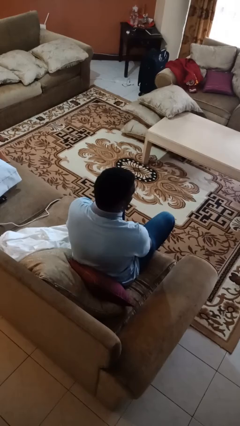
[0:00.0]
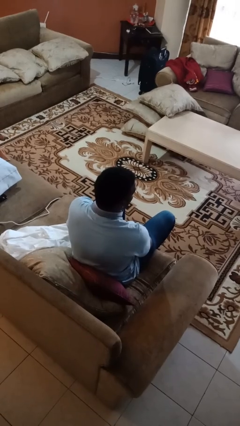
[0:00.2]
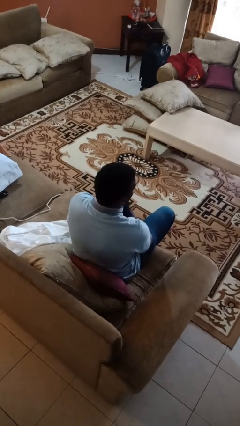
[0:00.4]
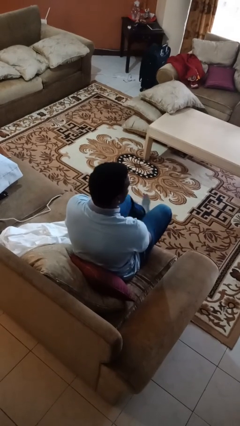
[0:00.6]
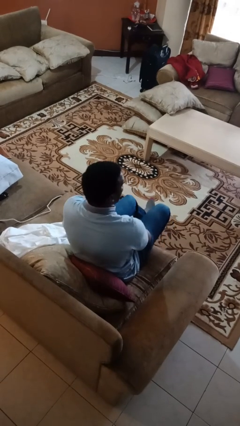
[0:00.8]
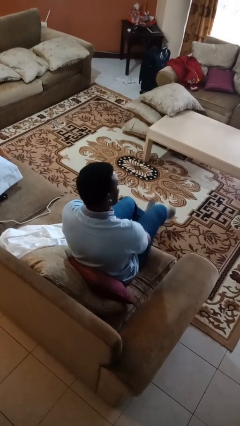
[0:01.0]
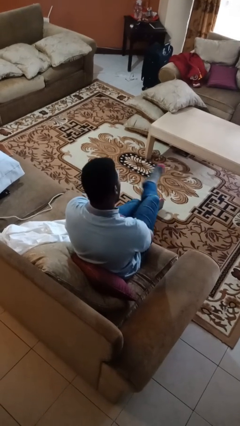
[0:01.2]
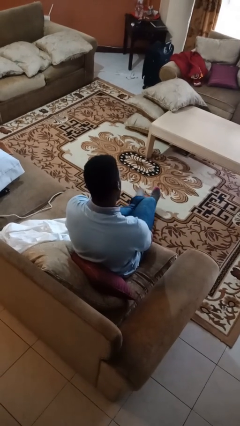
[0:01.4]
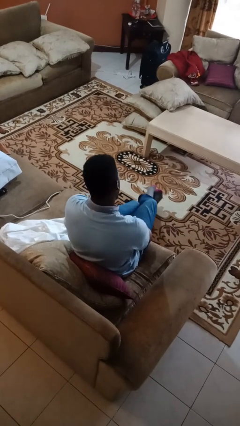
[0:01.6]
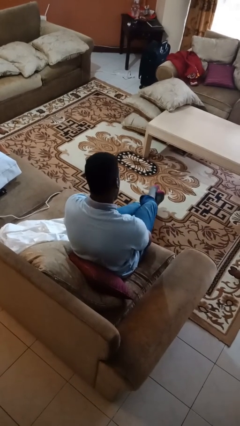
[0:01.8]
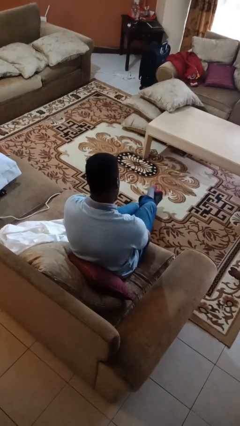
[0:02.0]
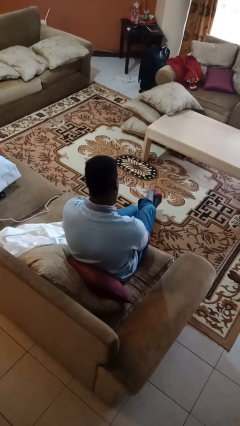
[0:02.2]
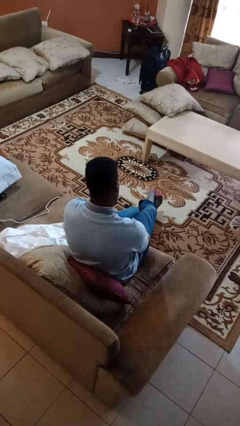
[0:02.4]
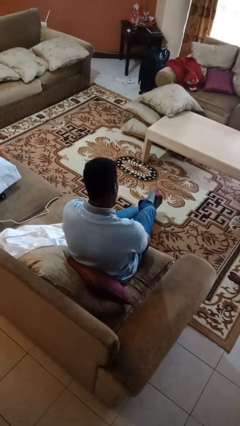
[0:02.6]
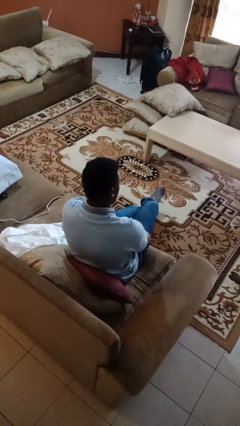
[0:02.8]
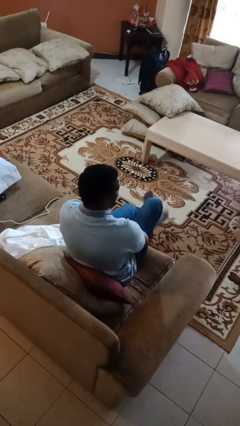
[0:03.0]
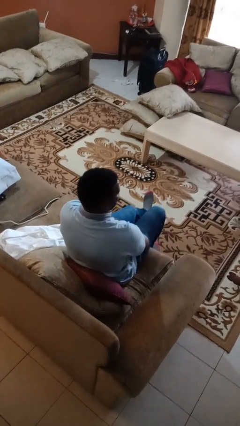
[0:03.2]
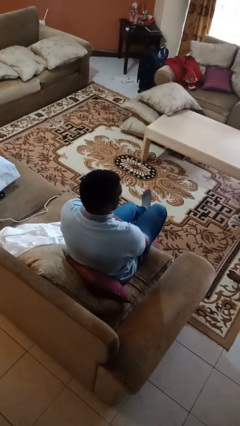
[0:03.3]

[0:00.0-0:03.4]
person crosses legs

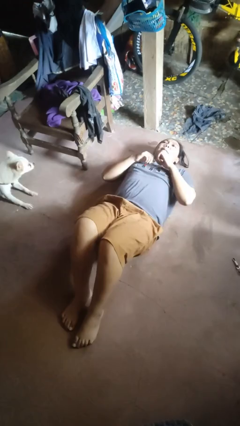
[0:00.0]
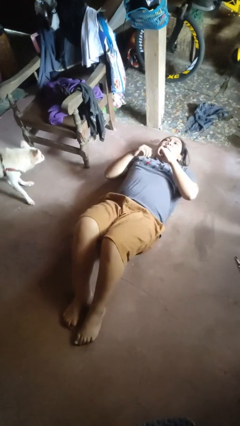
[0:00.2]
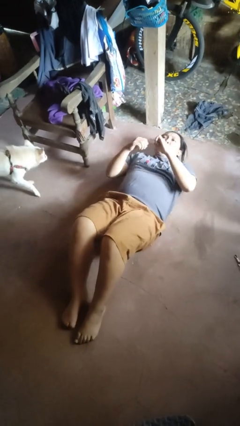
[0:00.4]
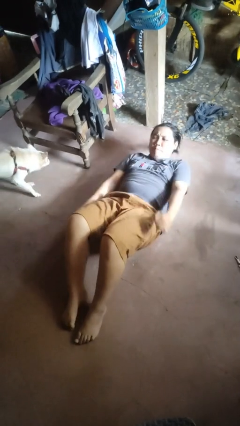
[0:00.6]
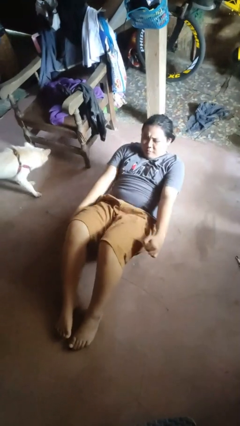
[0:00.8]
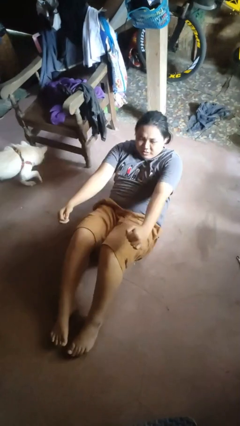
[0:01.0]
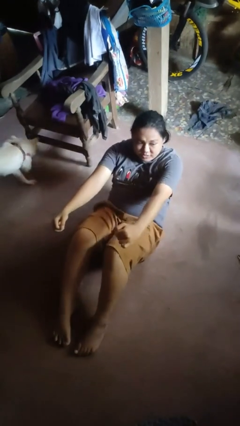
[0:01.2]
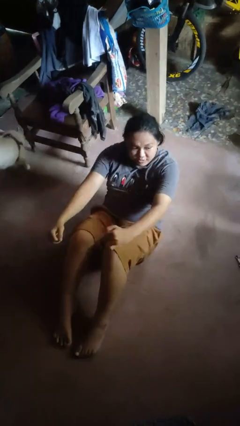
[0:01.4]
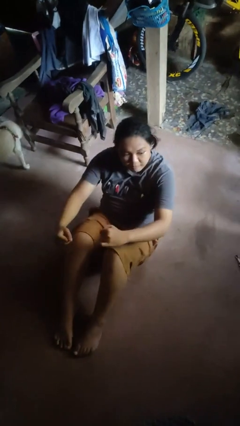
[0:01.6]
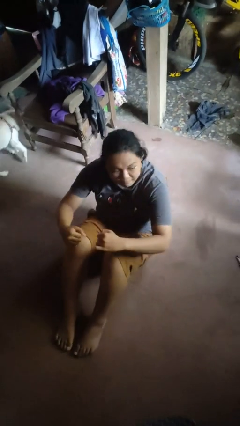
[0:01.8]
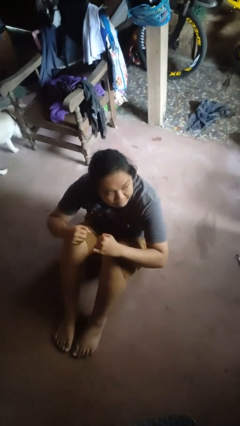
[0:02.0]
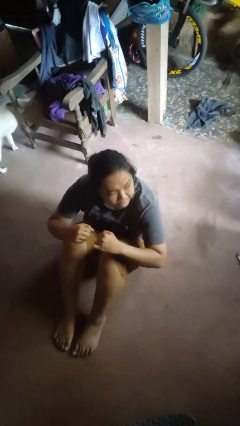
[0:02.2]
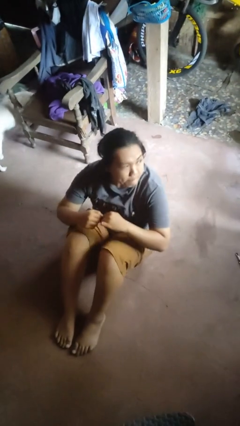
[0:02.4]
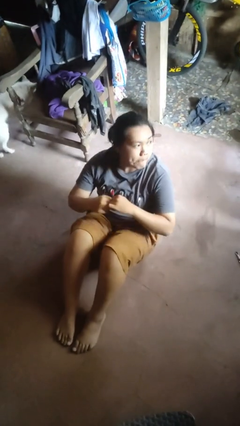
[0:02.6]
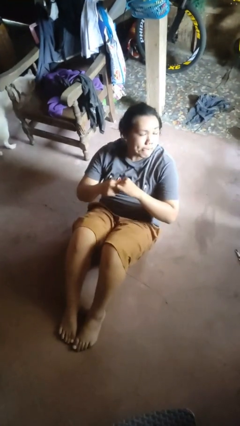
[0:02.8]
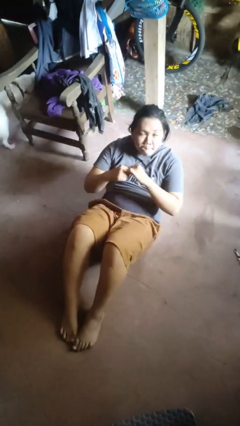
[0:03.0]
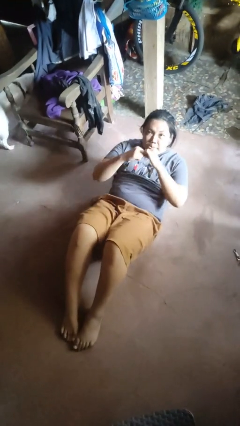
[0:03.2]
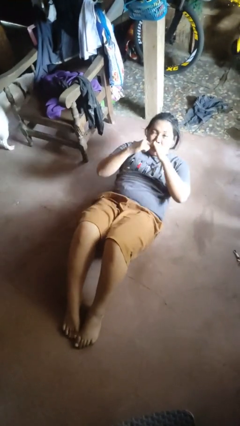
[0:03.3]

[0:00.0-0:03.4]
person exercises with situp

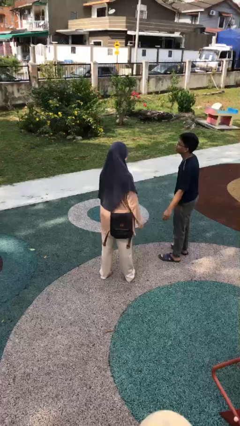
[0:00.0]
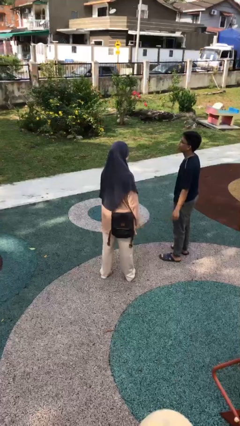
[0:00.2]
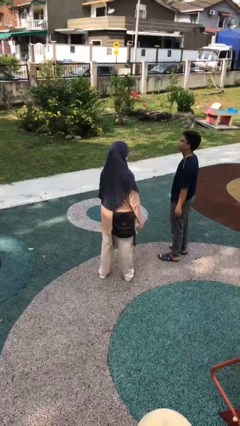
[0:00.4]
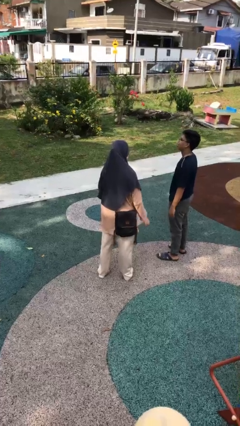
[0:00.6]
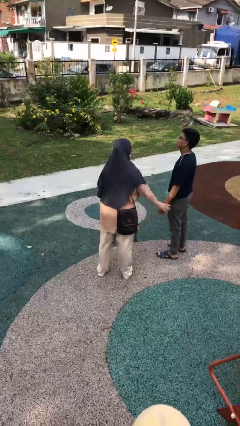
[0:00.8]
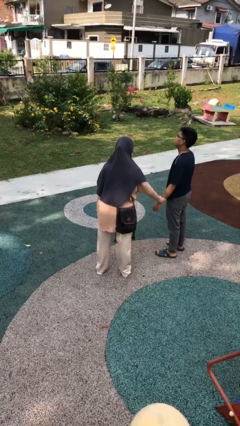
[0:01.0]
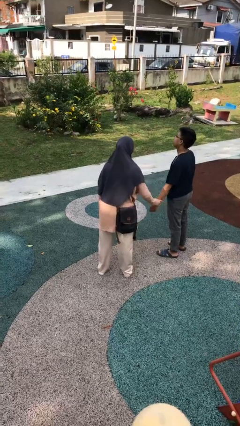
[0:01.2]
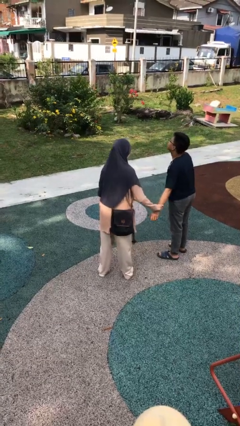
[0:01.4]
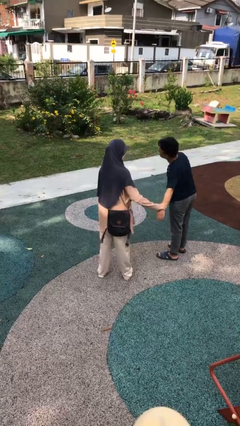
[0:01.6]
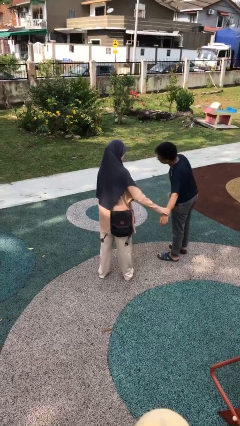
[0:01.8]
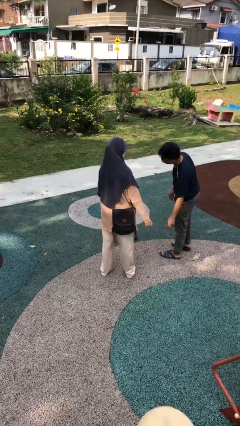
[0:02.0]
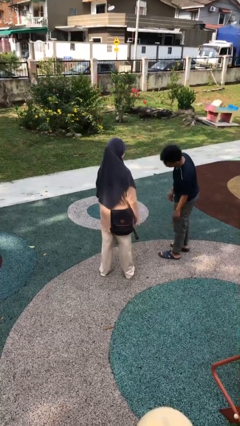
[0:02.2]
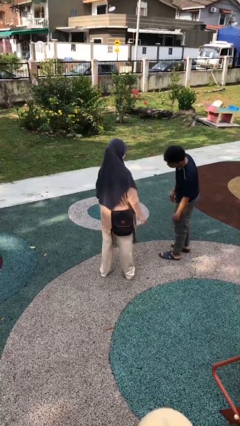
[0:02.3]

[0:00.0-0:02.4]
person grabs person by forearm

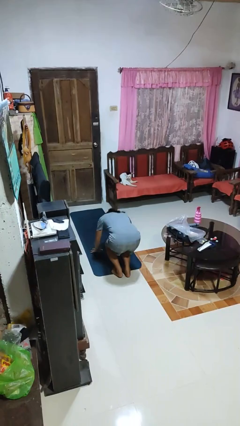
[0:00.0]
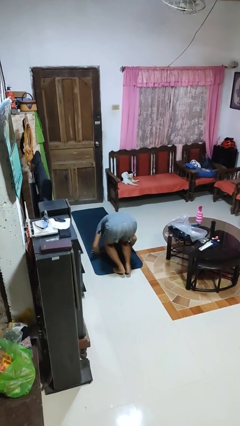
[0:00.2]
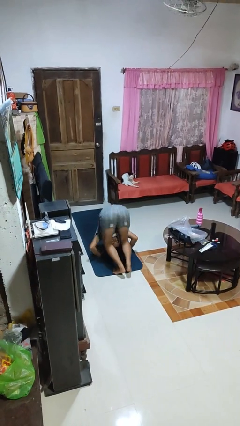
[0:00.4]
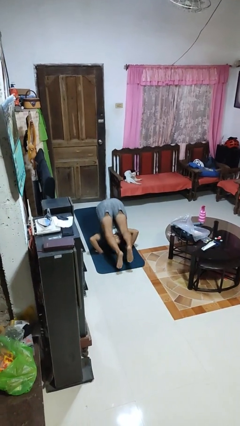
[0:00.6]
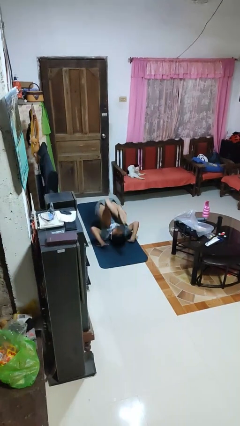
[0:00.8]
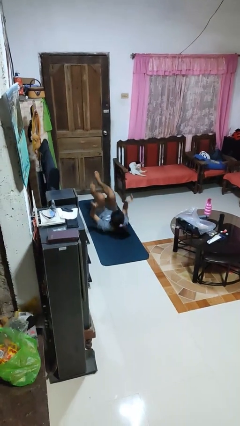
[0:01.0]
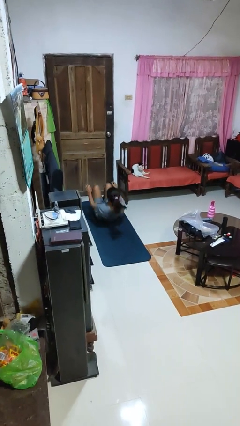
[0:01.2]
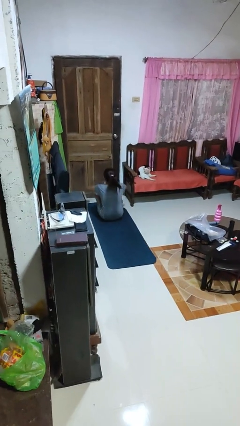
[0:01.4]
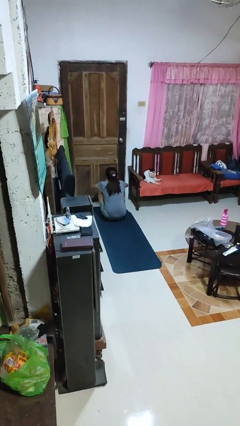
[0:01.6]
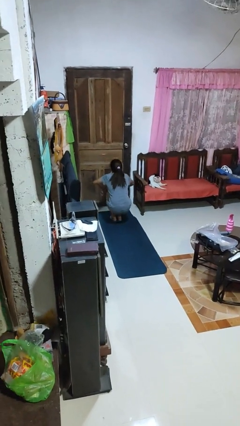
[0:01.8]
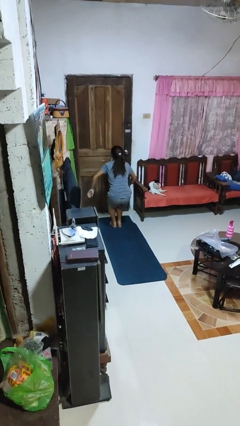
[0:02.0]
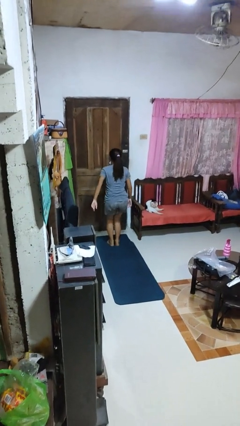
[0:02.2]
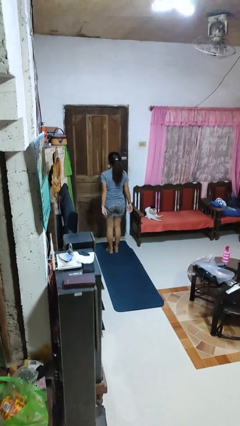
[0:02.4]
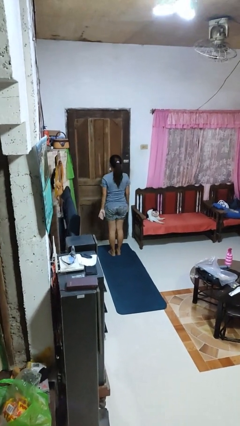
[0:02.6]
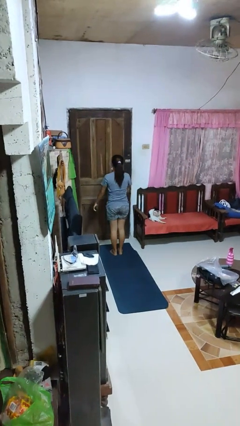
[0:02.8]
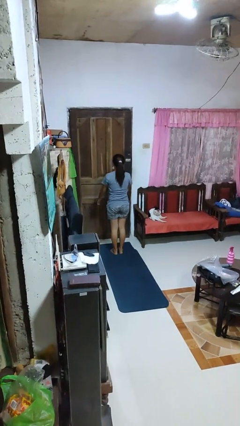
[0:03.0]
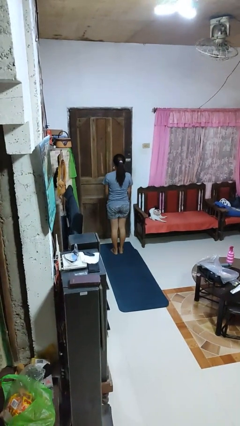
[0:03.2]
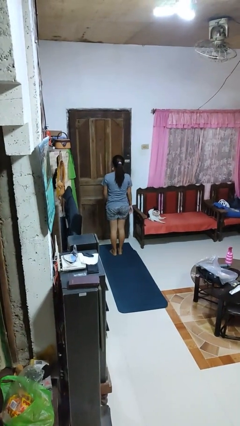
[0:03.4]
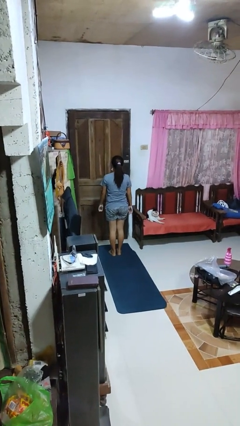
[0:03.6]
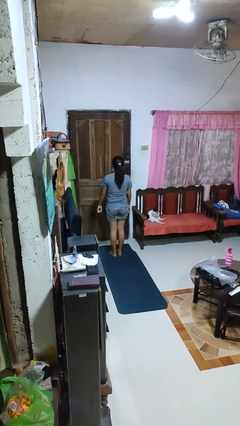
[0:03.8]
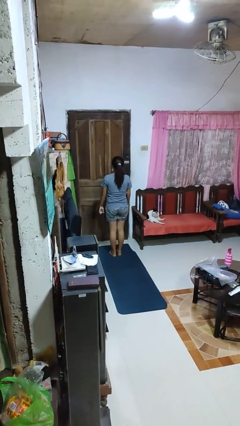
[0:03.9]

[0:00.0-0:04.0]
person somersaults

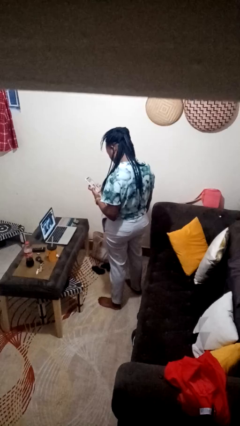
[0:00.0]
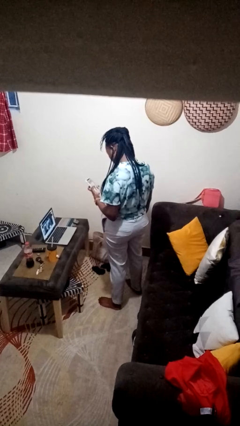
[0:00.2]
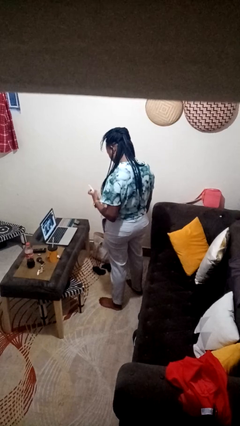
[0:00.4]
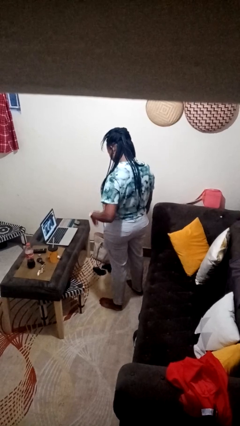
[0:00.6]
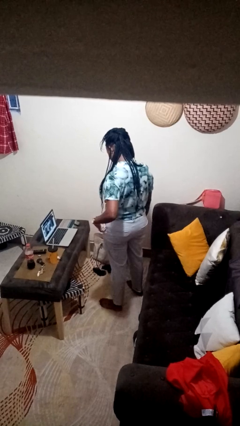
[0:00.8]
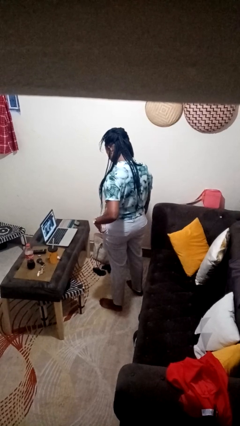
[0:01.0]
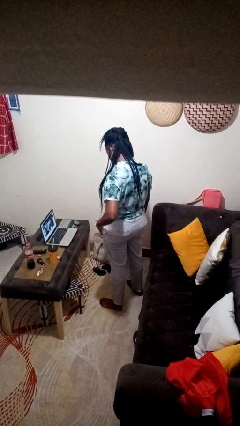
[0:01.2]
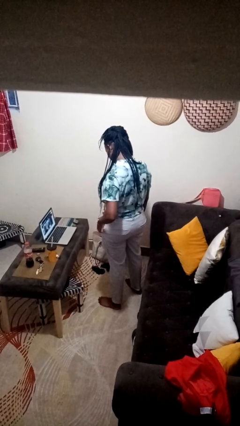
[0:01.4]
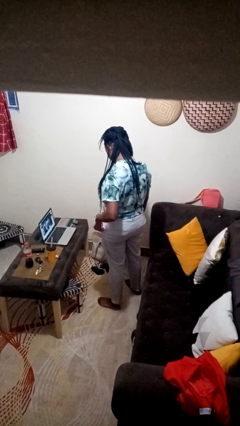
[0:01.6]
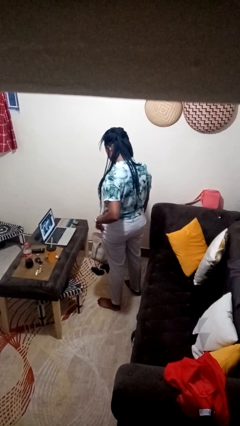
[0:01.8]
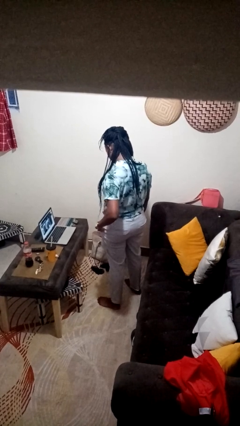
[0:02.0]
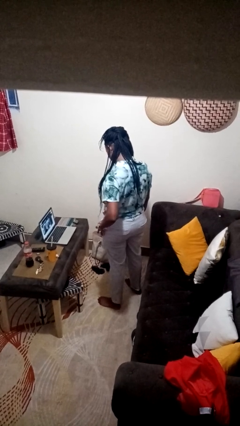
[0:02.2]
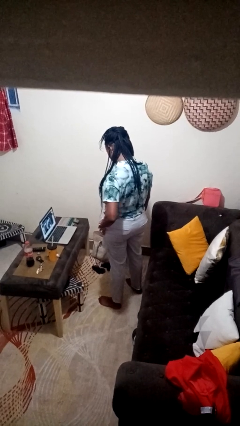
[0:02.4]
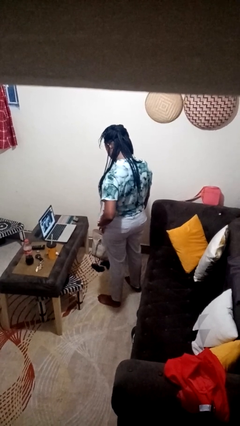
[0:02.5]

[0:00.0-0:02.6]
person puts phone into pocket

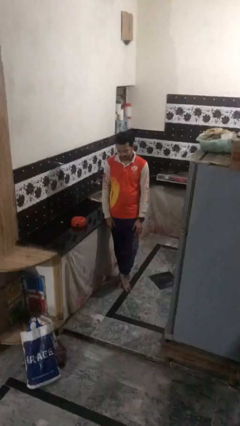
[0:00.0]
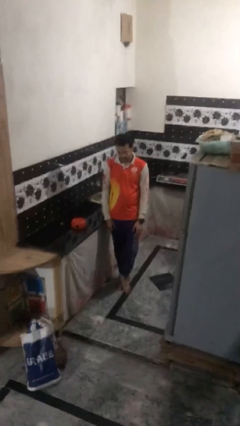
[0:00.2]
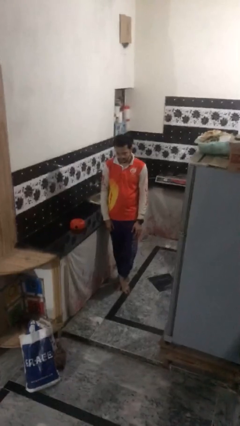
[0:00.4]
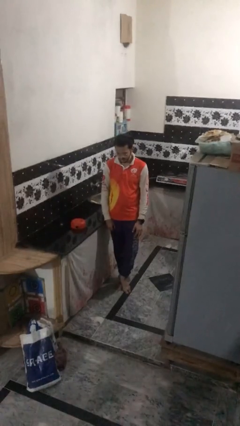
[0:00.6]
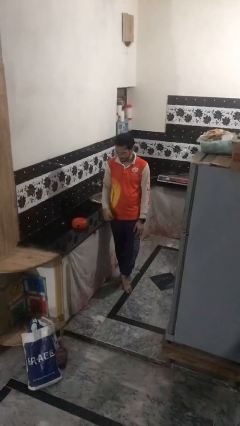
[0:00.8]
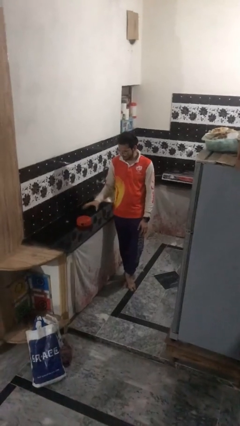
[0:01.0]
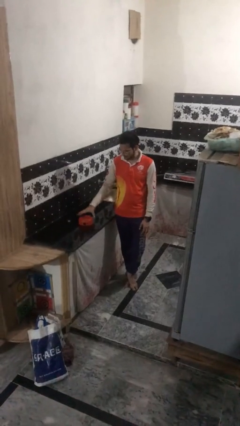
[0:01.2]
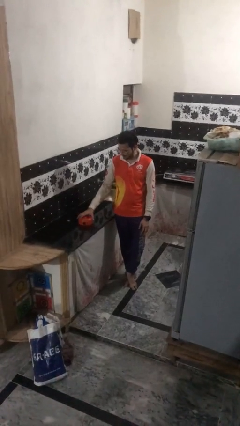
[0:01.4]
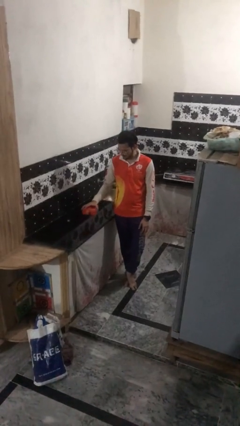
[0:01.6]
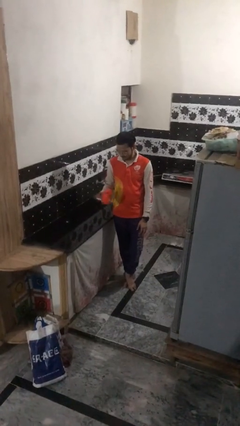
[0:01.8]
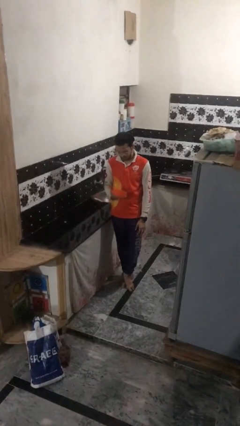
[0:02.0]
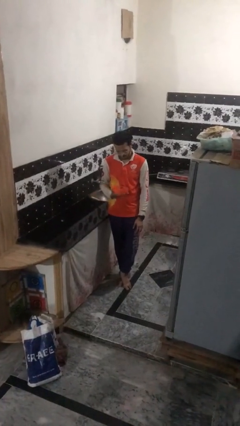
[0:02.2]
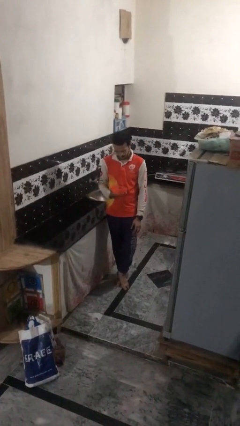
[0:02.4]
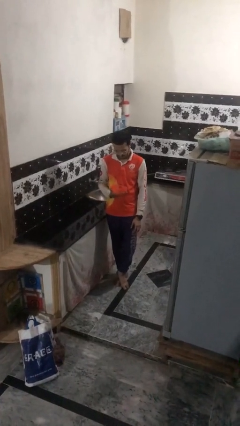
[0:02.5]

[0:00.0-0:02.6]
person picks up object from countertop
